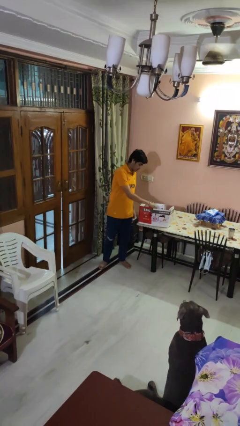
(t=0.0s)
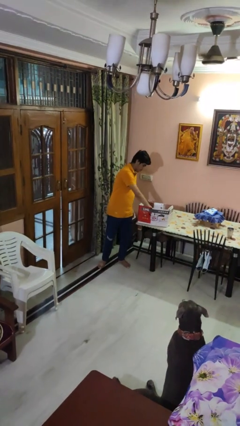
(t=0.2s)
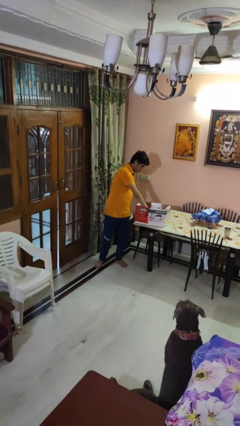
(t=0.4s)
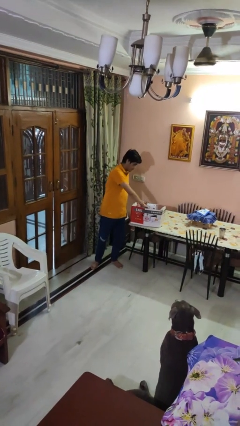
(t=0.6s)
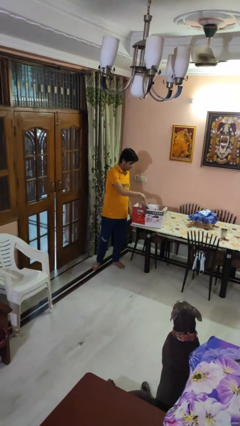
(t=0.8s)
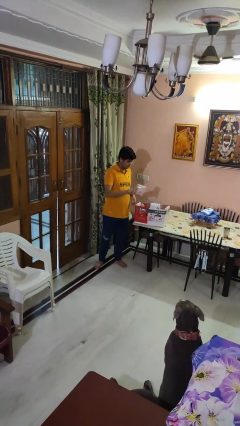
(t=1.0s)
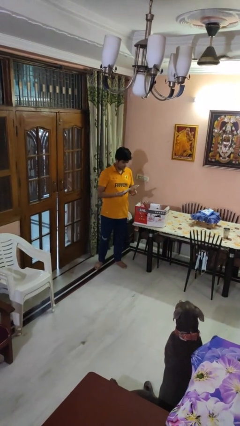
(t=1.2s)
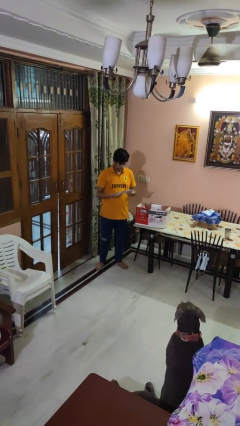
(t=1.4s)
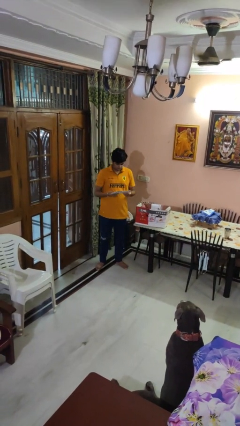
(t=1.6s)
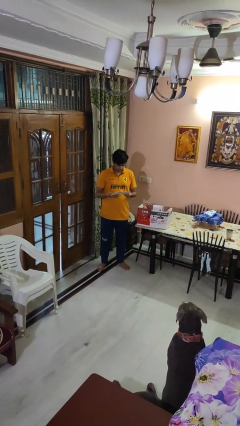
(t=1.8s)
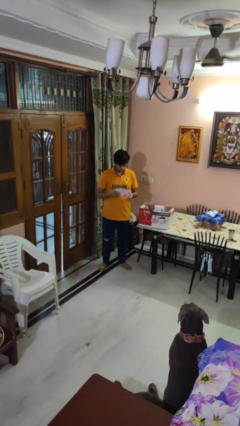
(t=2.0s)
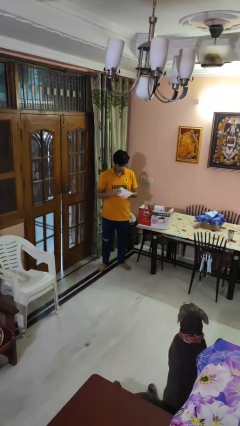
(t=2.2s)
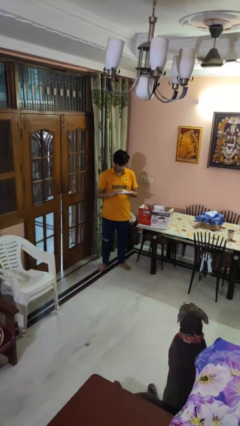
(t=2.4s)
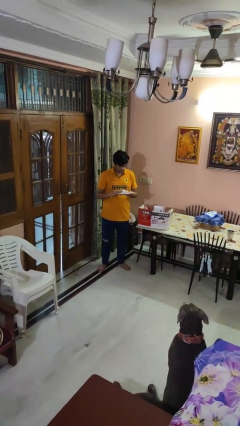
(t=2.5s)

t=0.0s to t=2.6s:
person takes object from box

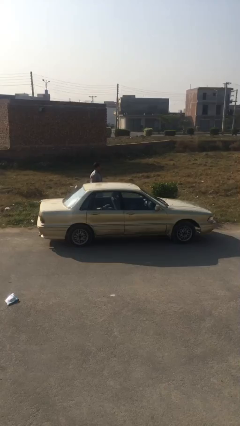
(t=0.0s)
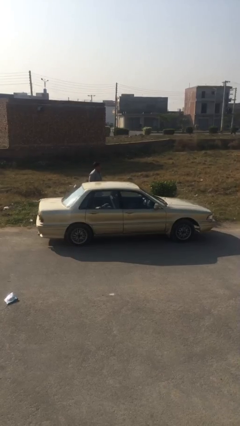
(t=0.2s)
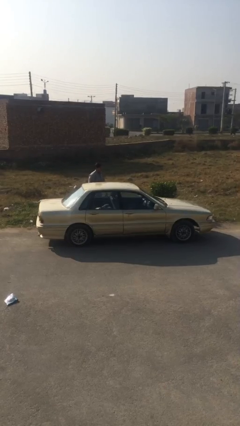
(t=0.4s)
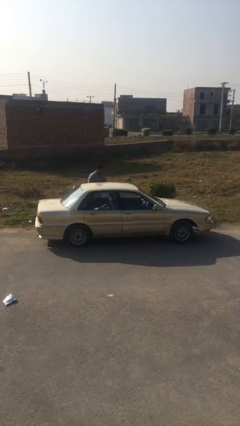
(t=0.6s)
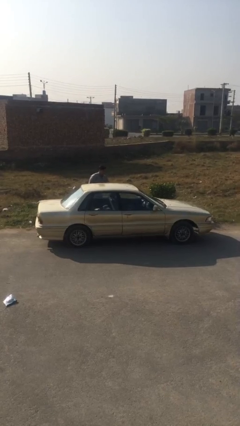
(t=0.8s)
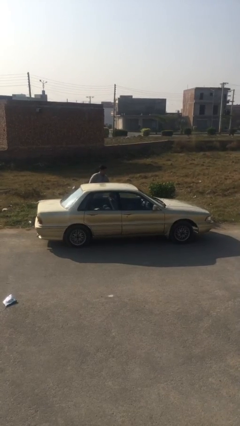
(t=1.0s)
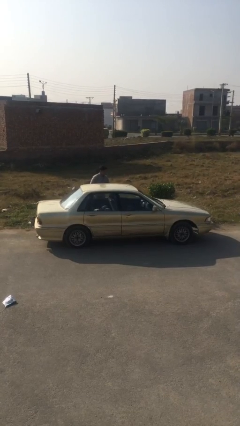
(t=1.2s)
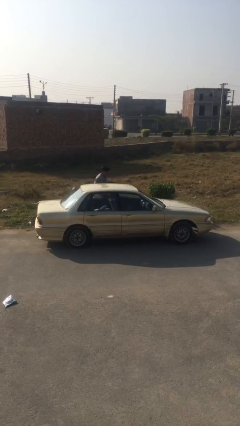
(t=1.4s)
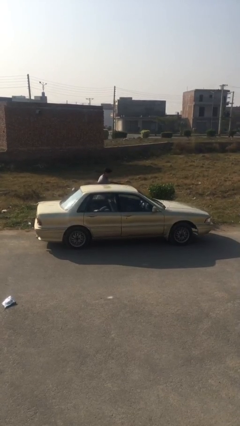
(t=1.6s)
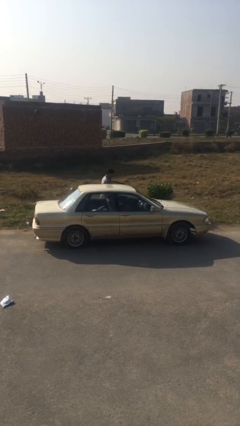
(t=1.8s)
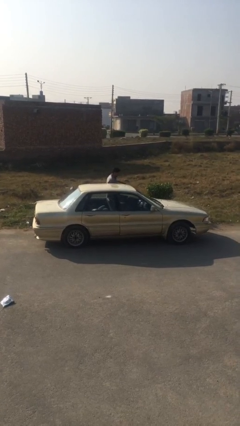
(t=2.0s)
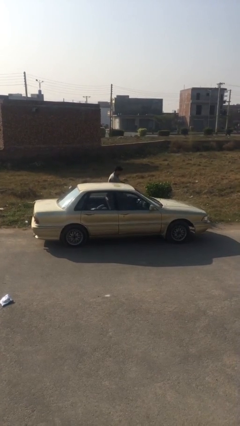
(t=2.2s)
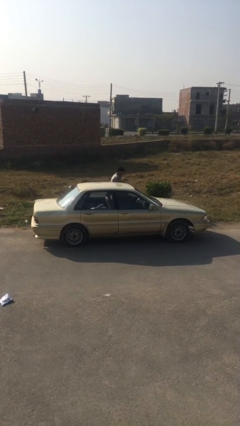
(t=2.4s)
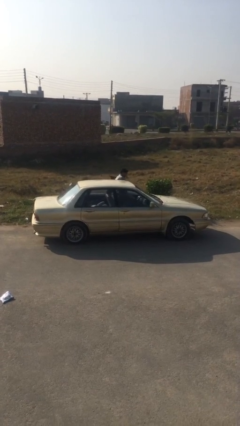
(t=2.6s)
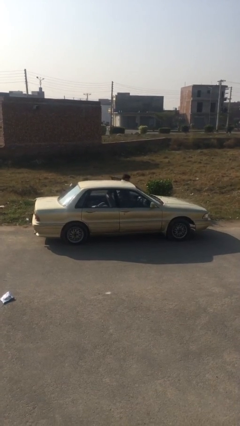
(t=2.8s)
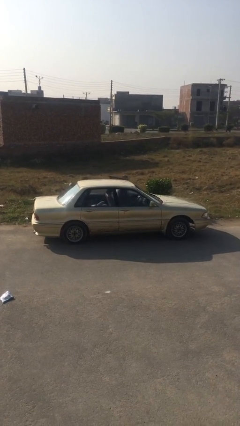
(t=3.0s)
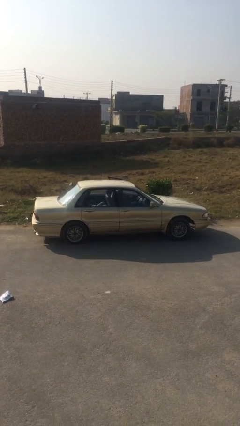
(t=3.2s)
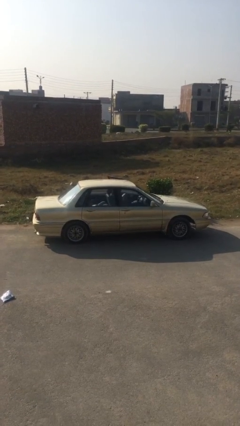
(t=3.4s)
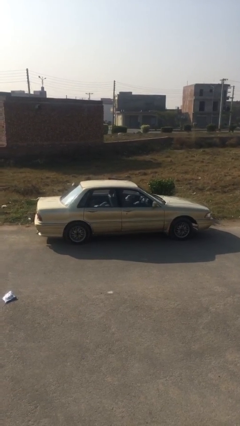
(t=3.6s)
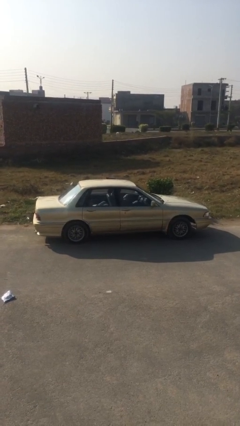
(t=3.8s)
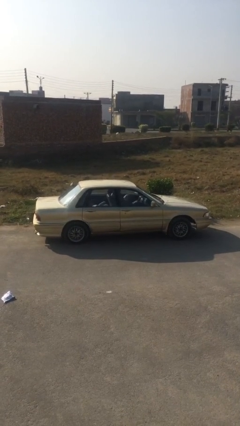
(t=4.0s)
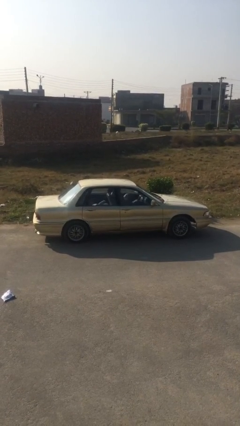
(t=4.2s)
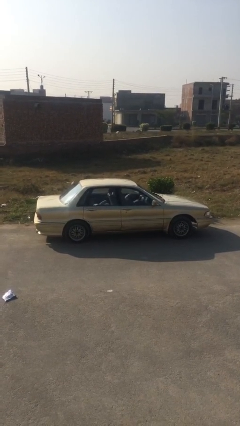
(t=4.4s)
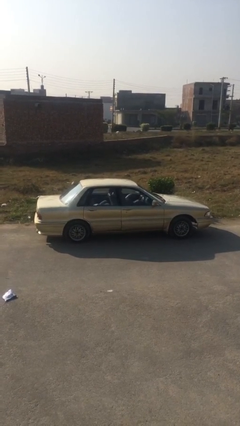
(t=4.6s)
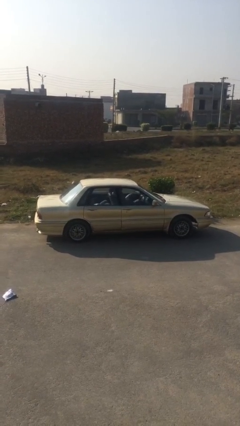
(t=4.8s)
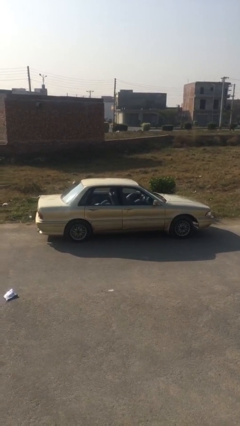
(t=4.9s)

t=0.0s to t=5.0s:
car picks up person

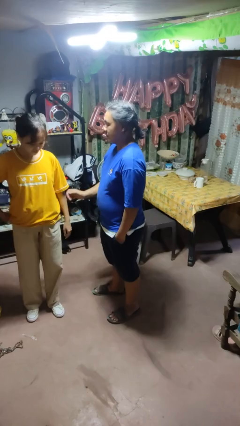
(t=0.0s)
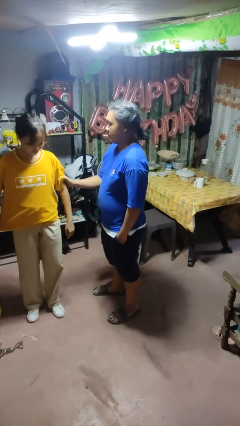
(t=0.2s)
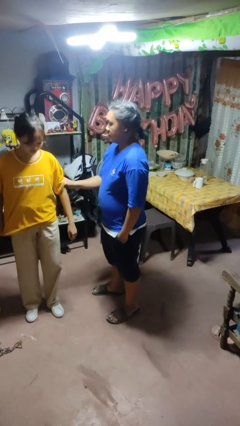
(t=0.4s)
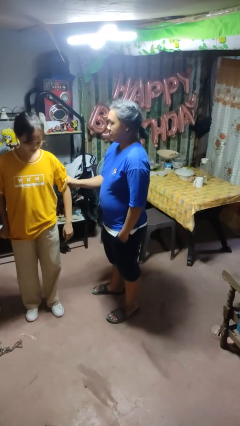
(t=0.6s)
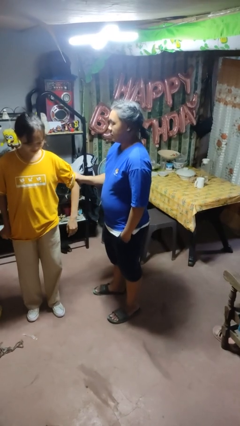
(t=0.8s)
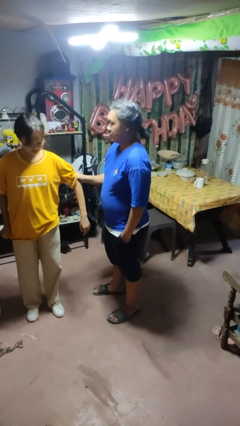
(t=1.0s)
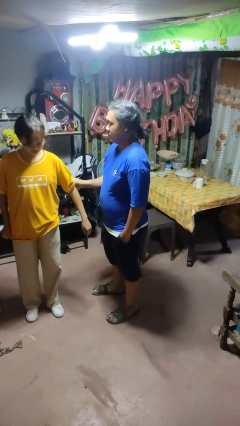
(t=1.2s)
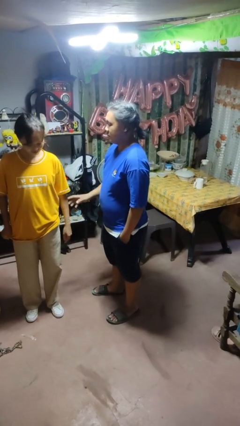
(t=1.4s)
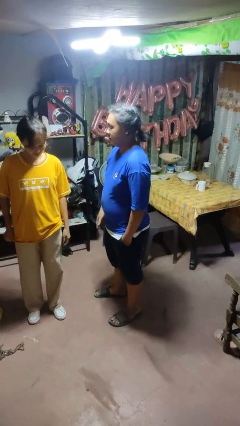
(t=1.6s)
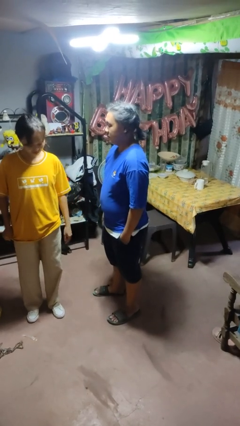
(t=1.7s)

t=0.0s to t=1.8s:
person grabs person by bicep

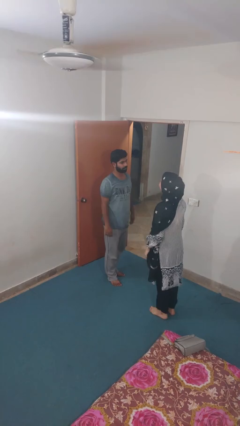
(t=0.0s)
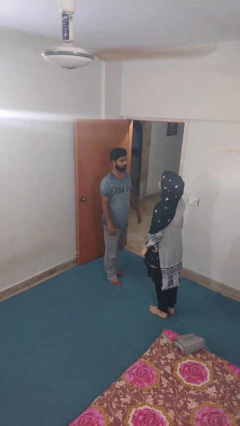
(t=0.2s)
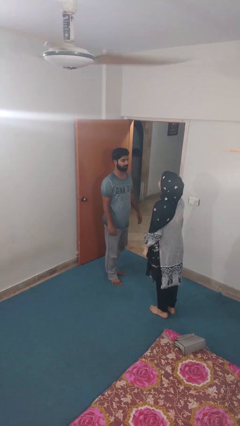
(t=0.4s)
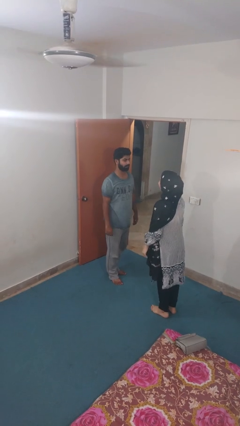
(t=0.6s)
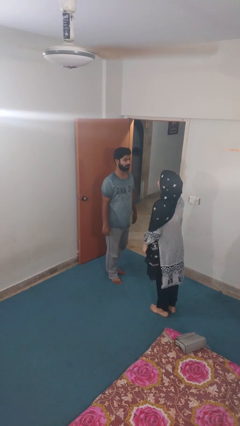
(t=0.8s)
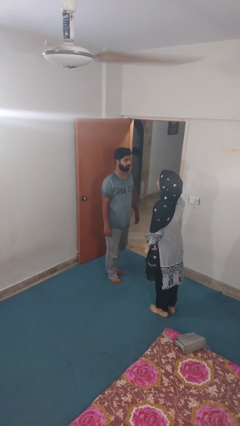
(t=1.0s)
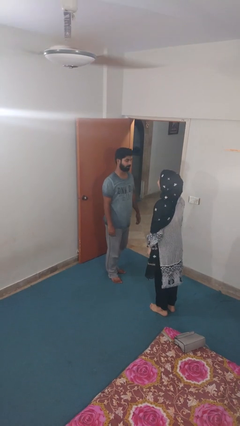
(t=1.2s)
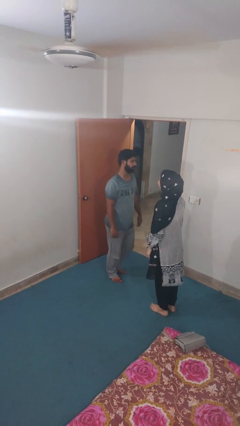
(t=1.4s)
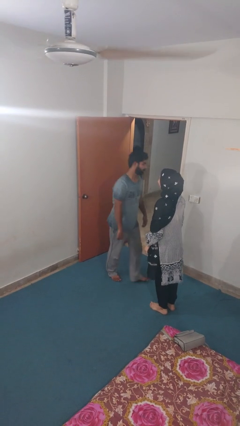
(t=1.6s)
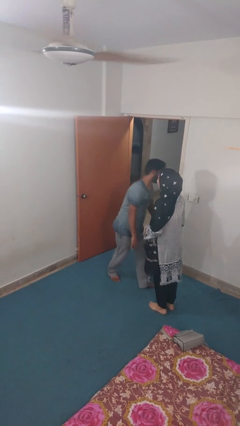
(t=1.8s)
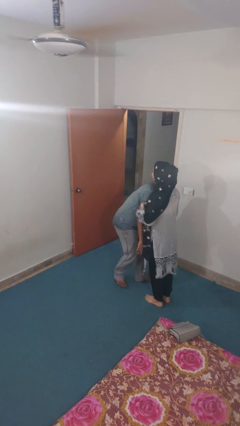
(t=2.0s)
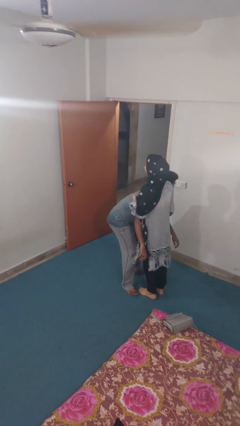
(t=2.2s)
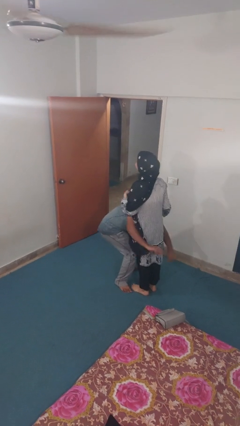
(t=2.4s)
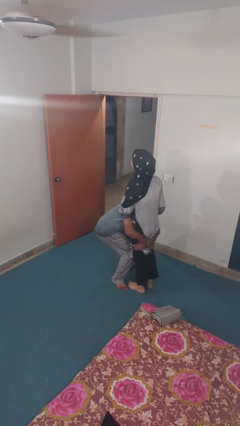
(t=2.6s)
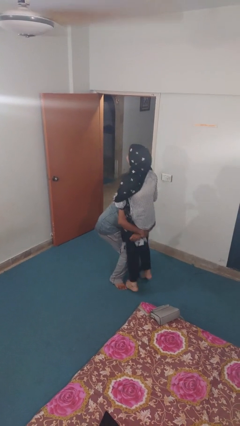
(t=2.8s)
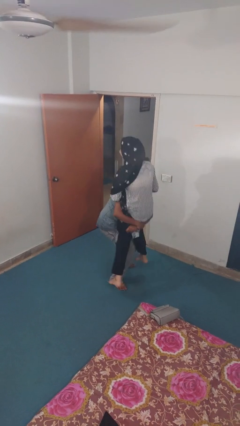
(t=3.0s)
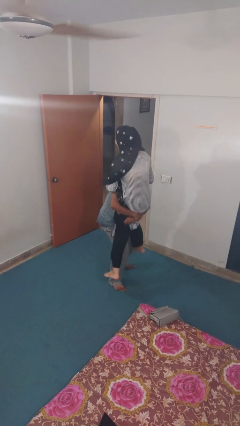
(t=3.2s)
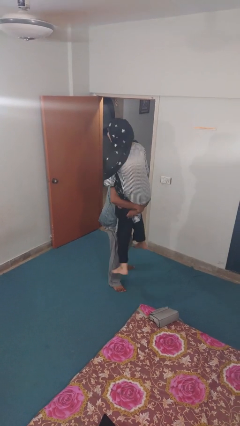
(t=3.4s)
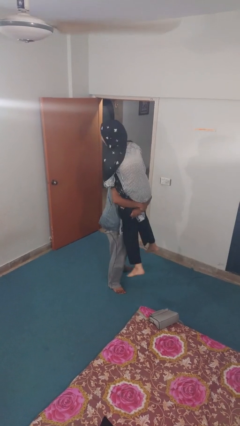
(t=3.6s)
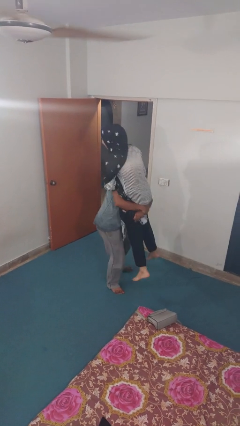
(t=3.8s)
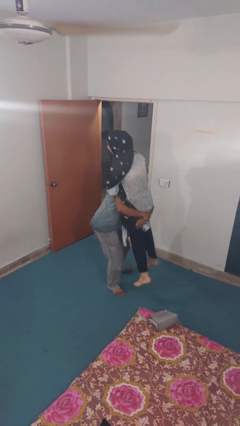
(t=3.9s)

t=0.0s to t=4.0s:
person picks up person

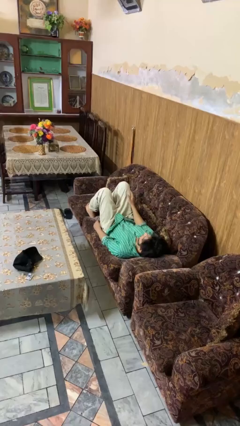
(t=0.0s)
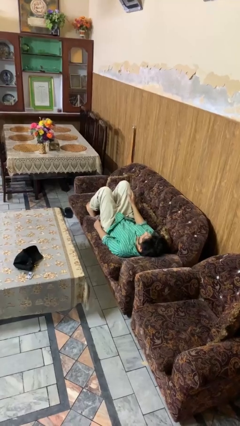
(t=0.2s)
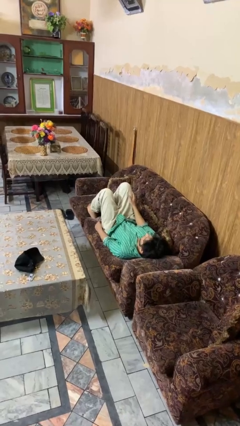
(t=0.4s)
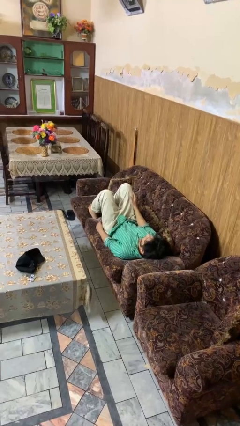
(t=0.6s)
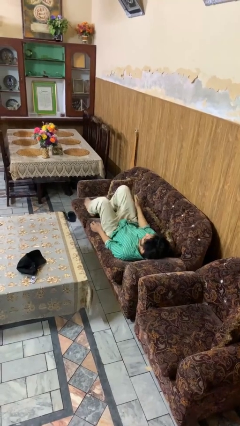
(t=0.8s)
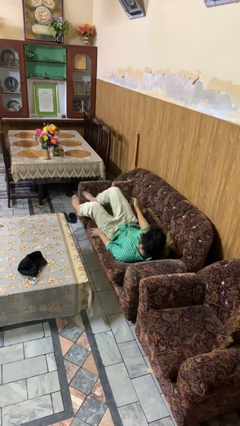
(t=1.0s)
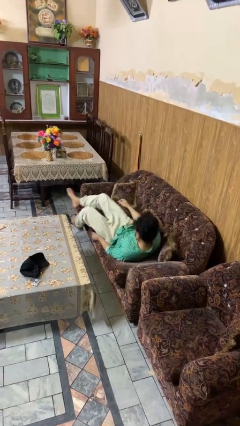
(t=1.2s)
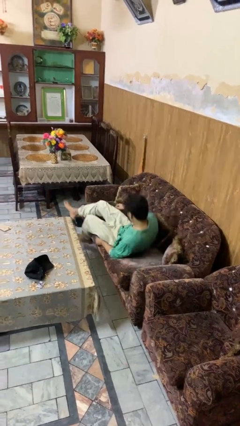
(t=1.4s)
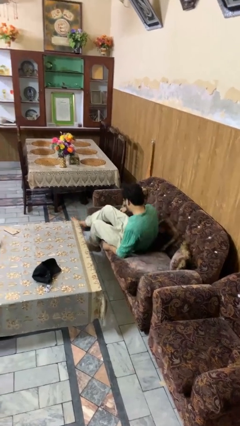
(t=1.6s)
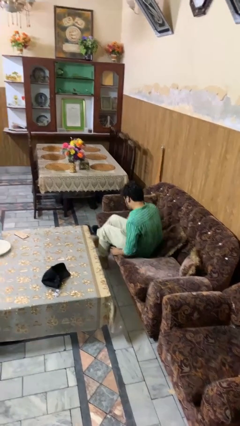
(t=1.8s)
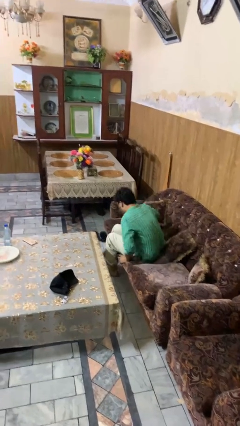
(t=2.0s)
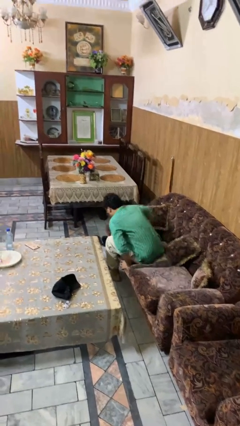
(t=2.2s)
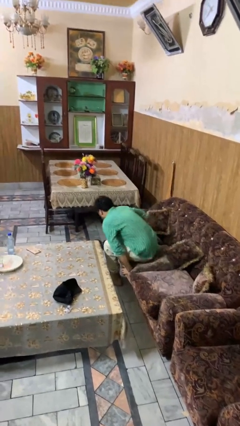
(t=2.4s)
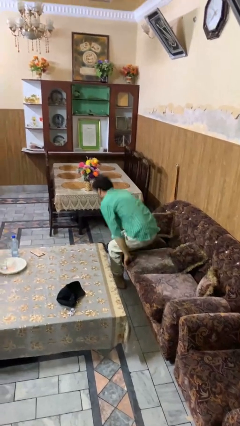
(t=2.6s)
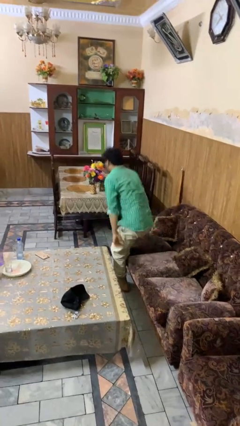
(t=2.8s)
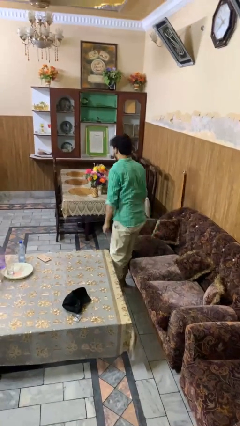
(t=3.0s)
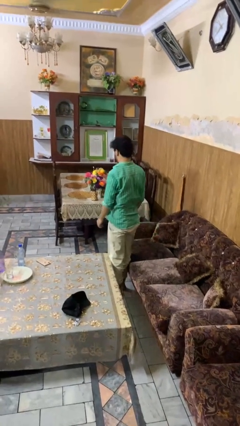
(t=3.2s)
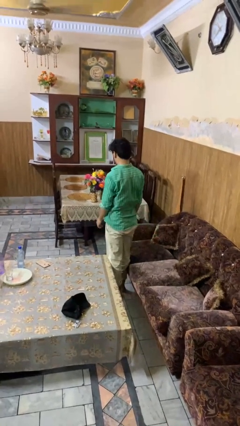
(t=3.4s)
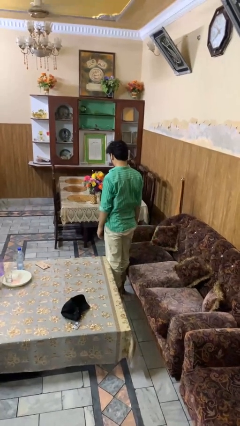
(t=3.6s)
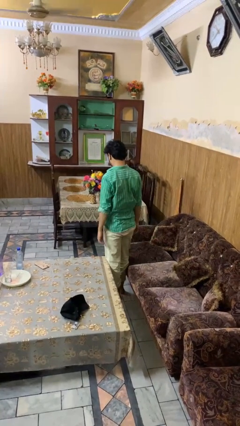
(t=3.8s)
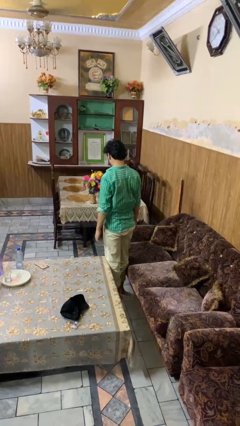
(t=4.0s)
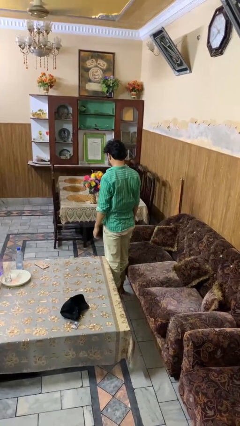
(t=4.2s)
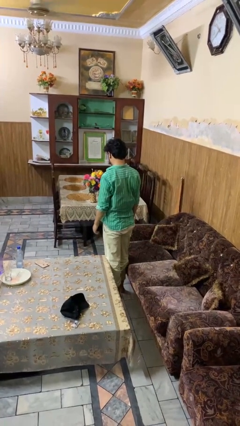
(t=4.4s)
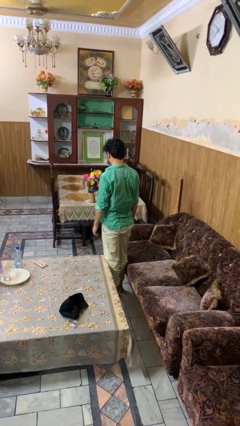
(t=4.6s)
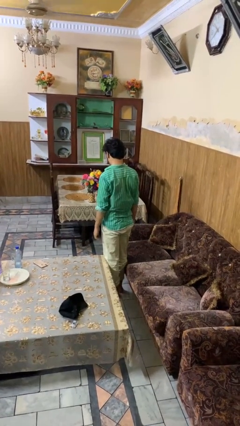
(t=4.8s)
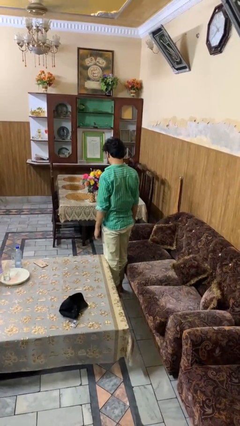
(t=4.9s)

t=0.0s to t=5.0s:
person stands up
